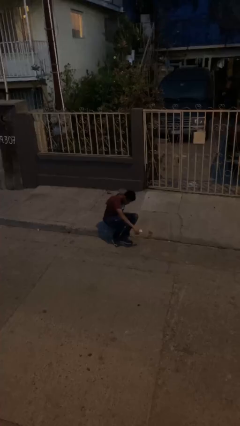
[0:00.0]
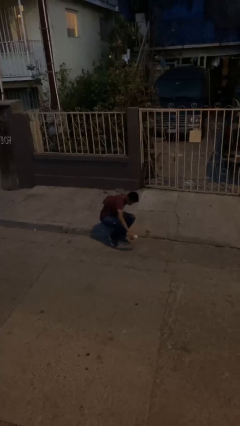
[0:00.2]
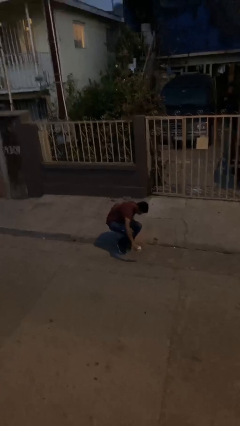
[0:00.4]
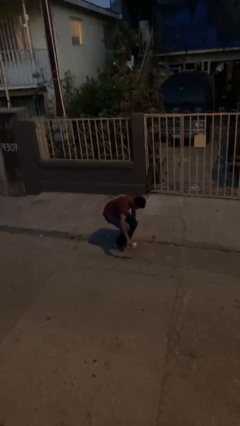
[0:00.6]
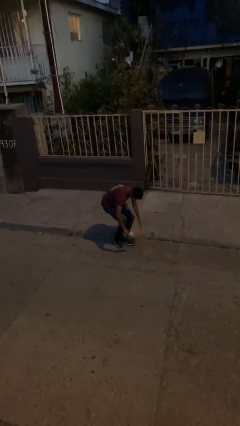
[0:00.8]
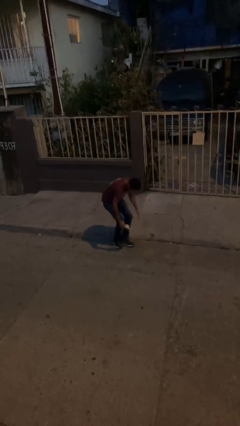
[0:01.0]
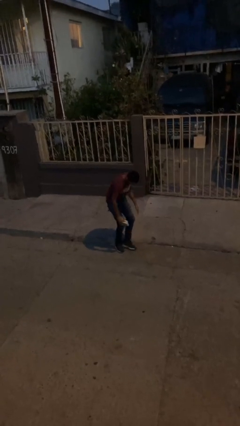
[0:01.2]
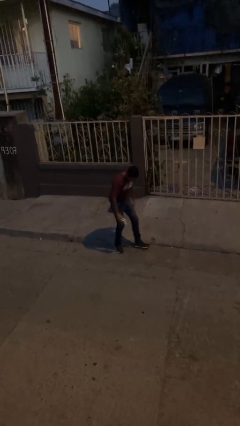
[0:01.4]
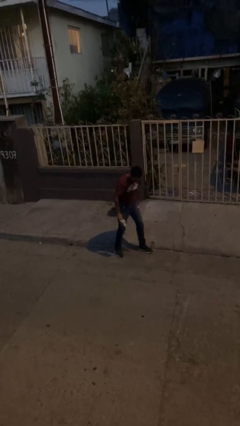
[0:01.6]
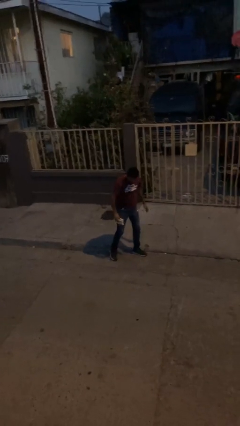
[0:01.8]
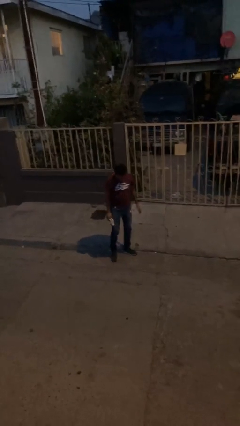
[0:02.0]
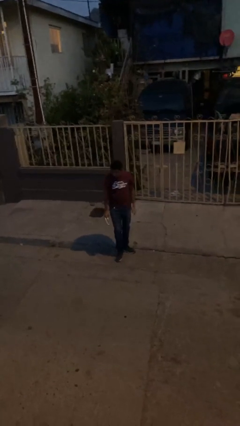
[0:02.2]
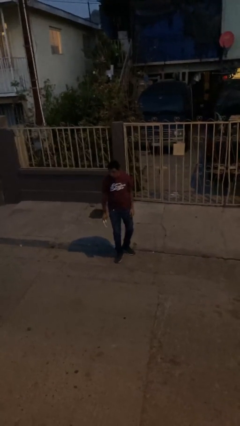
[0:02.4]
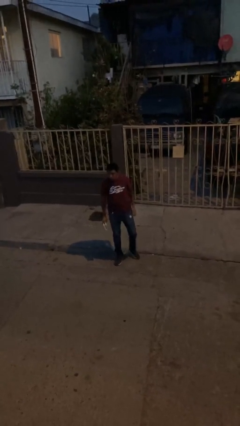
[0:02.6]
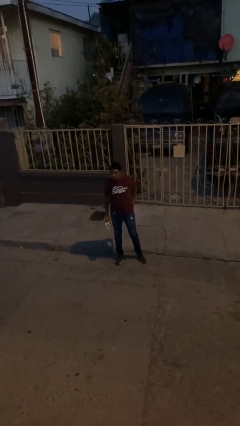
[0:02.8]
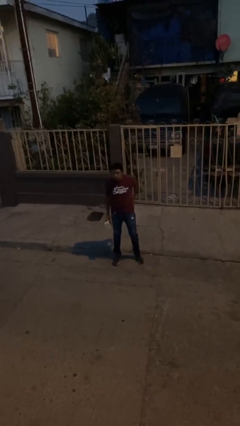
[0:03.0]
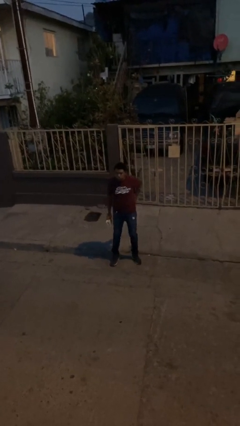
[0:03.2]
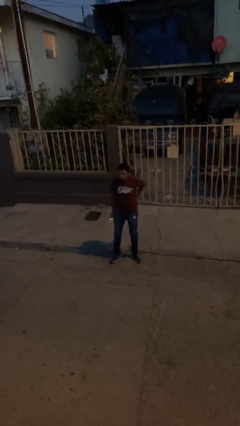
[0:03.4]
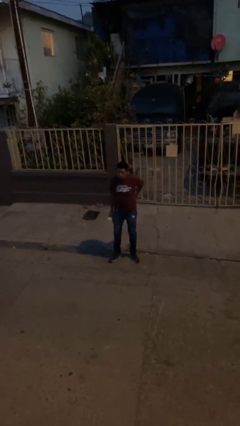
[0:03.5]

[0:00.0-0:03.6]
person stands up

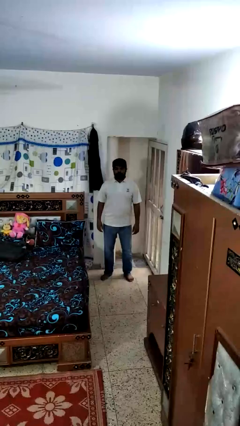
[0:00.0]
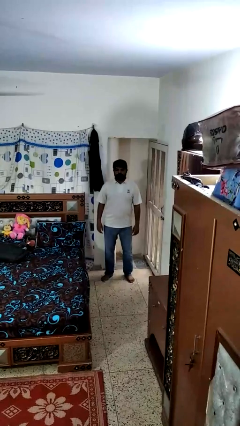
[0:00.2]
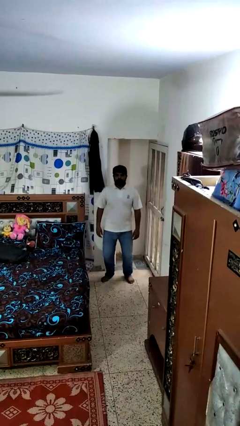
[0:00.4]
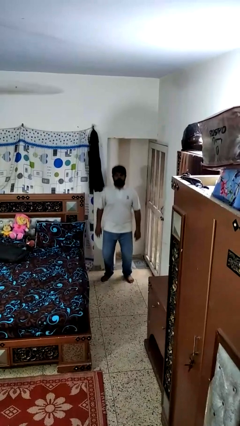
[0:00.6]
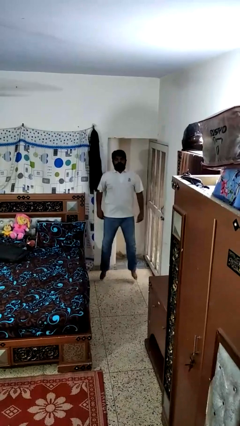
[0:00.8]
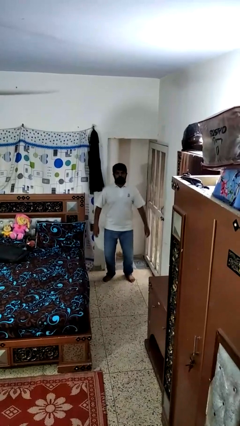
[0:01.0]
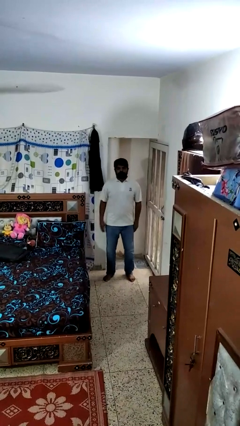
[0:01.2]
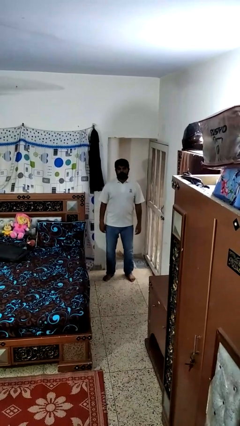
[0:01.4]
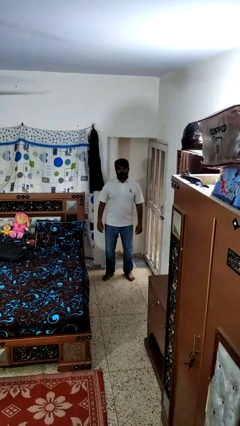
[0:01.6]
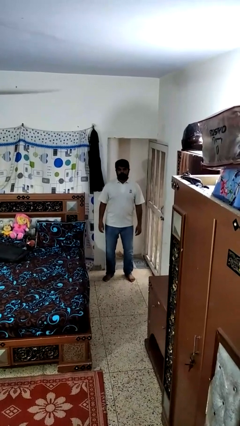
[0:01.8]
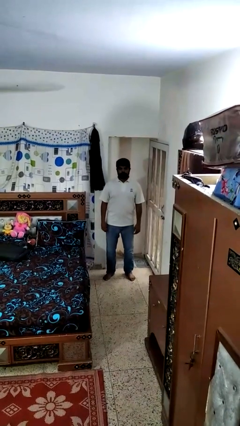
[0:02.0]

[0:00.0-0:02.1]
person jumps

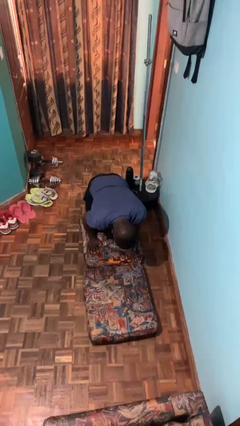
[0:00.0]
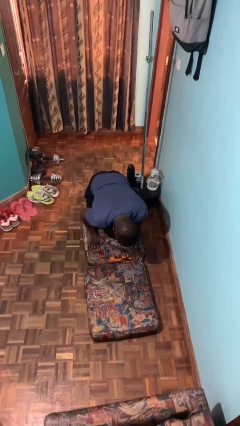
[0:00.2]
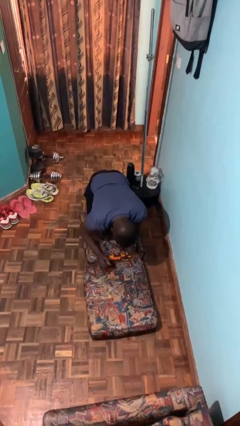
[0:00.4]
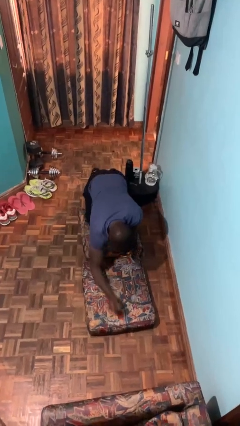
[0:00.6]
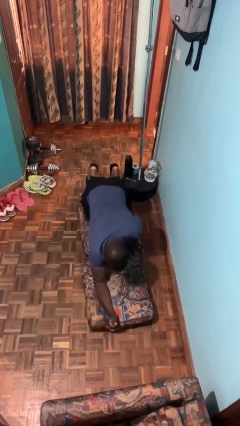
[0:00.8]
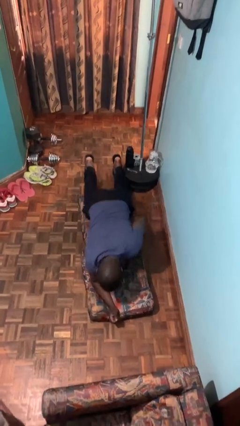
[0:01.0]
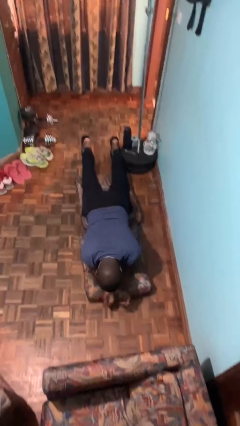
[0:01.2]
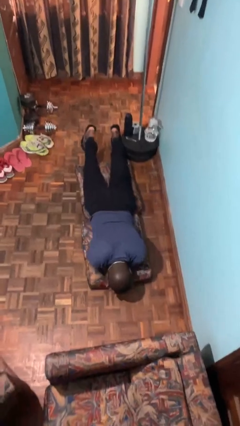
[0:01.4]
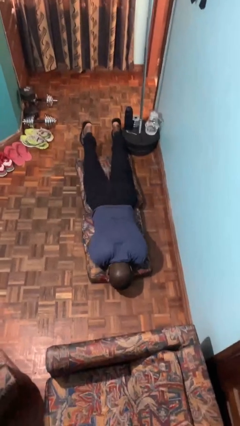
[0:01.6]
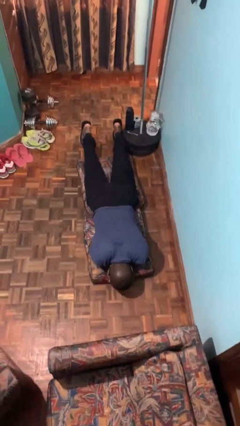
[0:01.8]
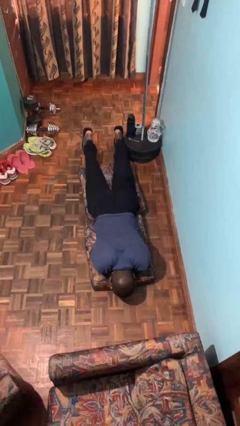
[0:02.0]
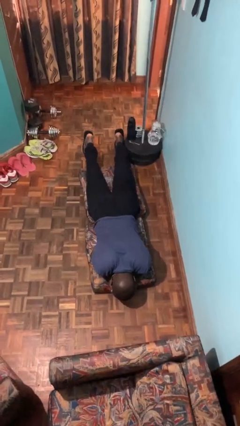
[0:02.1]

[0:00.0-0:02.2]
person lies down on floor

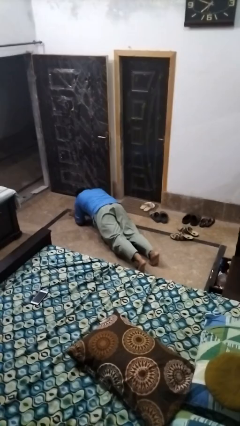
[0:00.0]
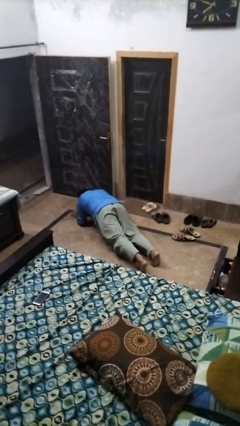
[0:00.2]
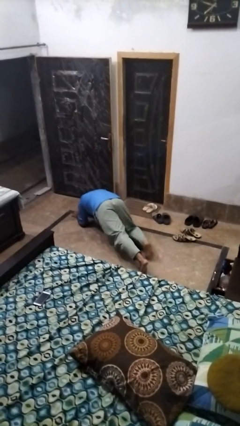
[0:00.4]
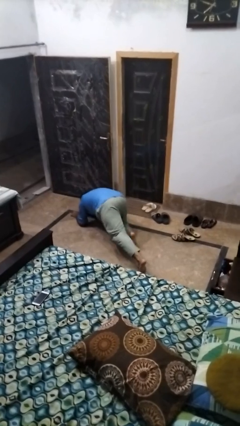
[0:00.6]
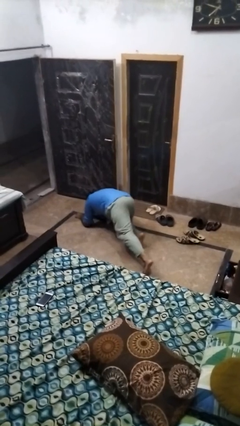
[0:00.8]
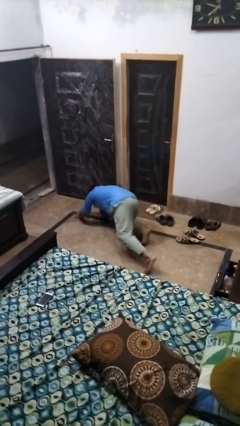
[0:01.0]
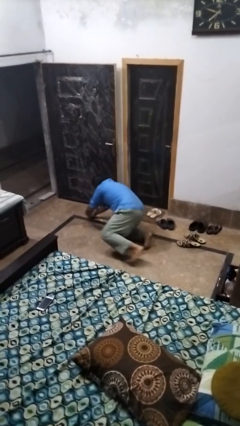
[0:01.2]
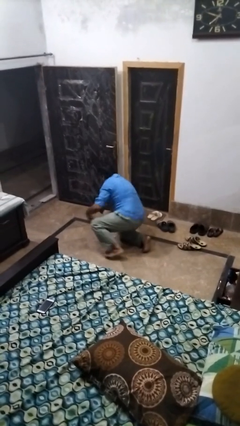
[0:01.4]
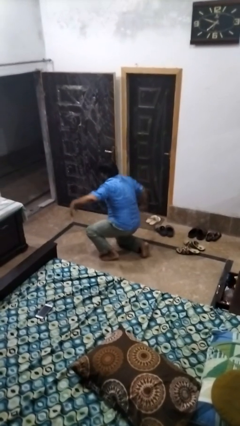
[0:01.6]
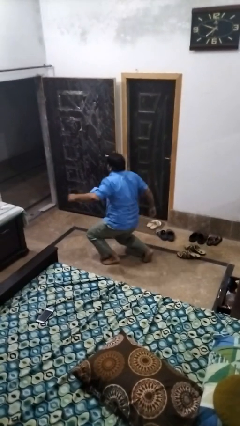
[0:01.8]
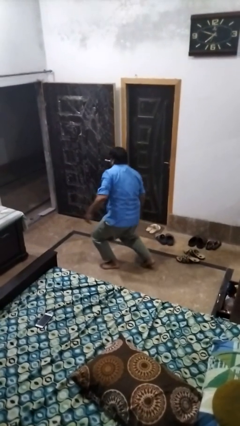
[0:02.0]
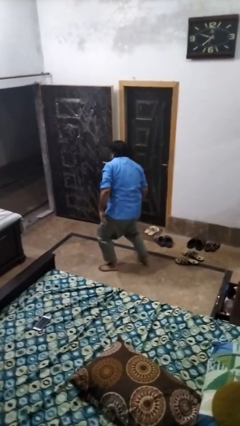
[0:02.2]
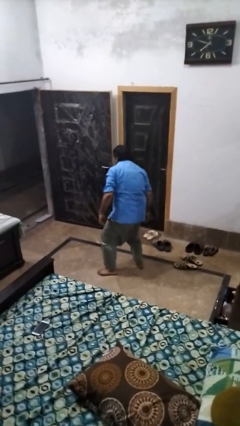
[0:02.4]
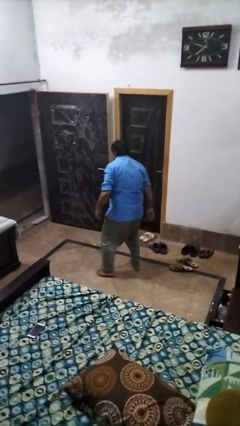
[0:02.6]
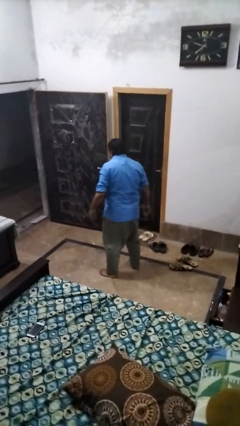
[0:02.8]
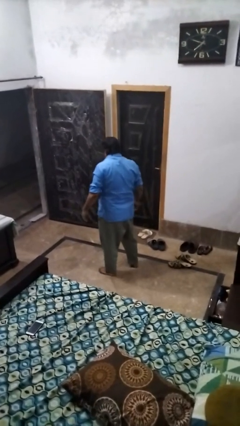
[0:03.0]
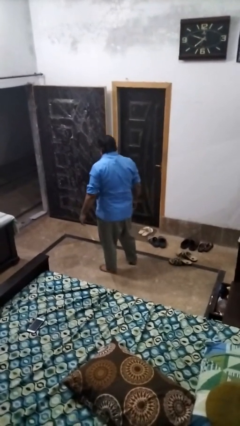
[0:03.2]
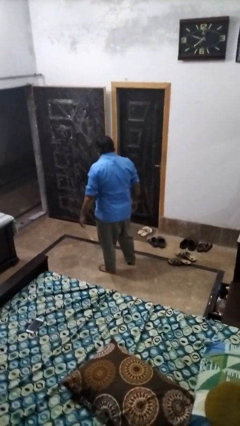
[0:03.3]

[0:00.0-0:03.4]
person stands up from floor

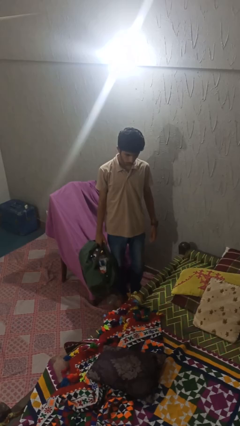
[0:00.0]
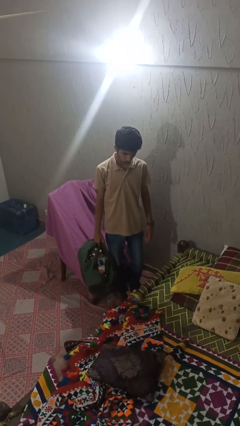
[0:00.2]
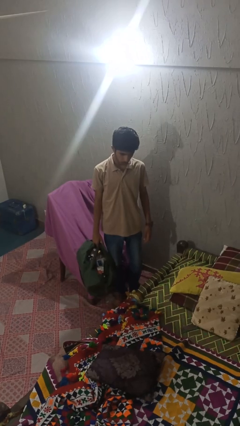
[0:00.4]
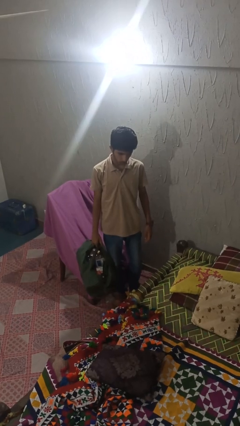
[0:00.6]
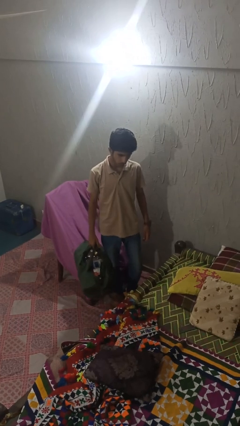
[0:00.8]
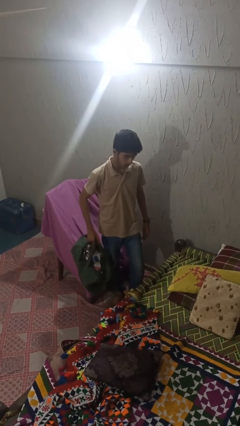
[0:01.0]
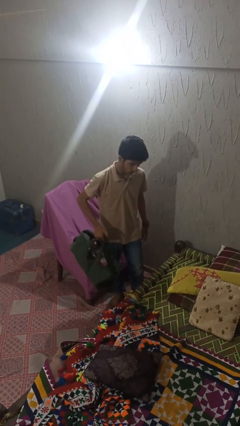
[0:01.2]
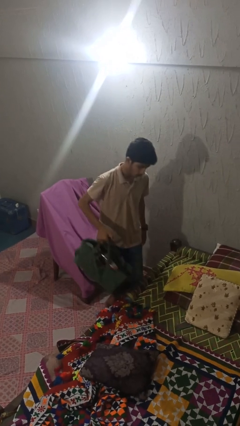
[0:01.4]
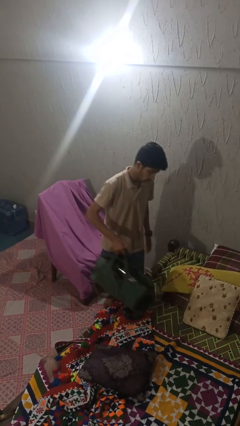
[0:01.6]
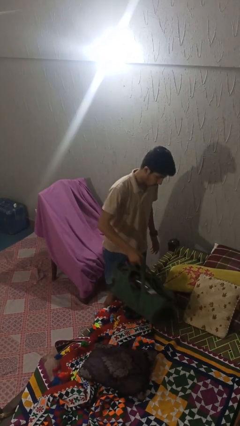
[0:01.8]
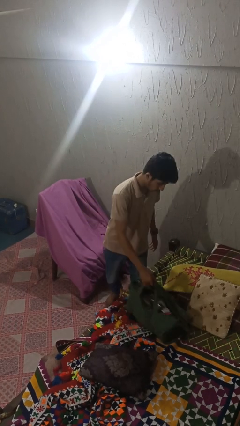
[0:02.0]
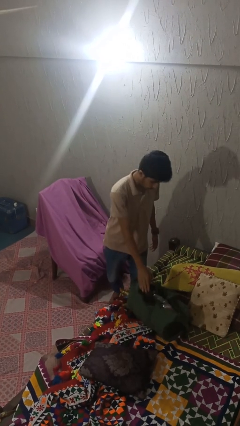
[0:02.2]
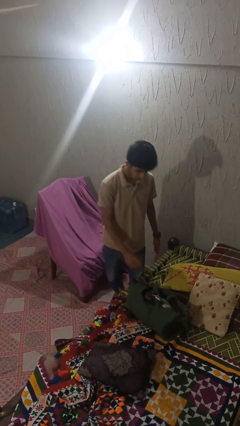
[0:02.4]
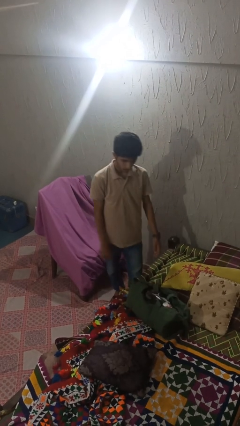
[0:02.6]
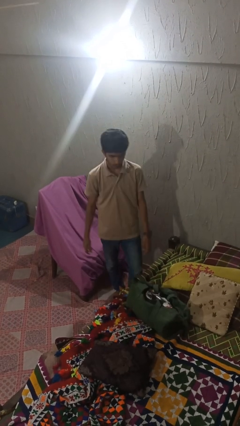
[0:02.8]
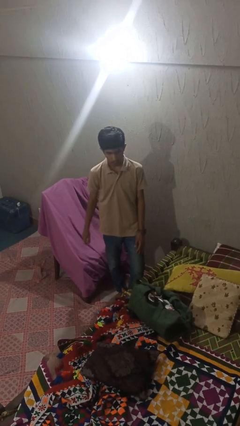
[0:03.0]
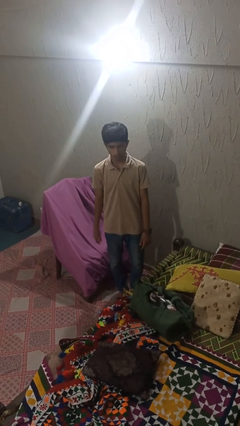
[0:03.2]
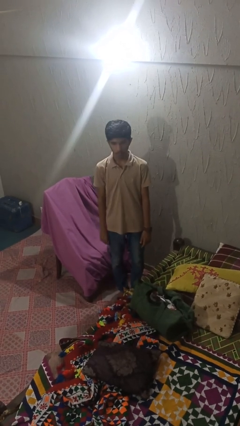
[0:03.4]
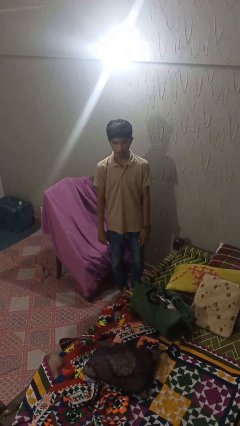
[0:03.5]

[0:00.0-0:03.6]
person puts down object on bed

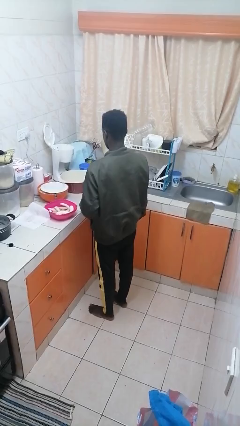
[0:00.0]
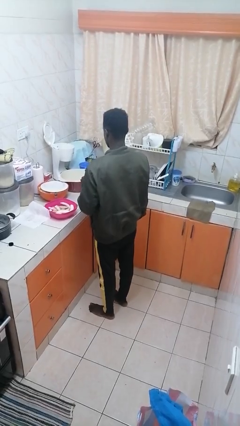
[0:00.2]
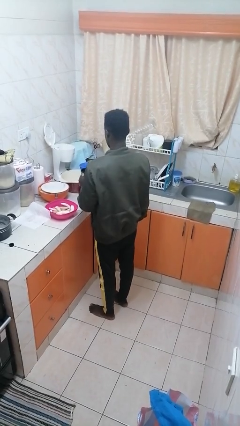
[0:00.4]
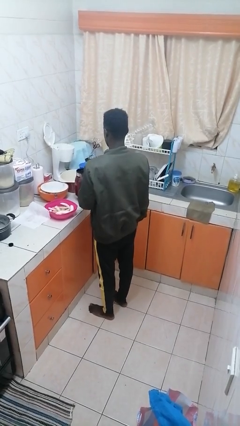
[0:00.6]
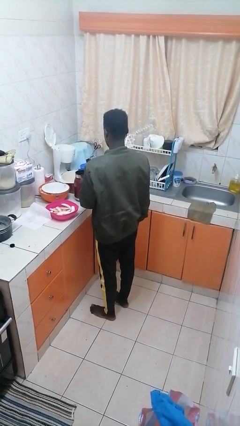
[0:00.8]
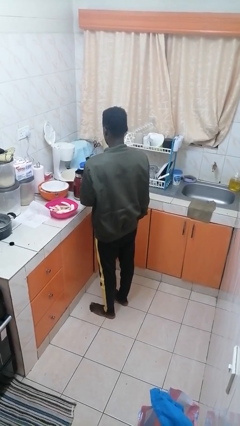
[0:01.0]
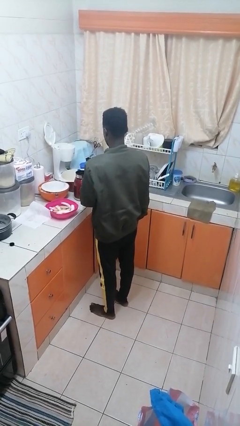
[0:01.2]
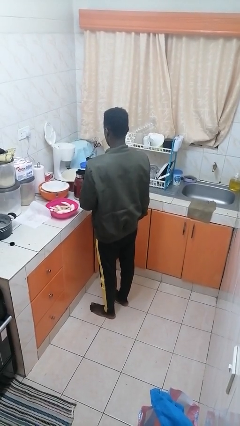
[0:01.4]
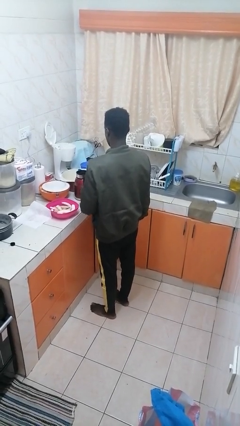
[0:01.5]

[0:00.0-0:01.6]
person puts down object on countertop

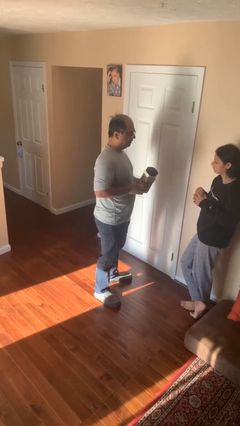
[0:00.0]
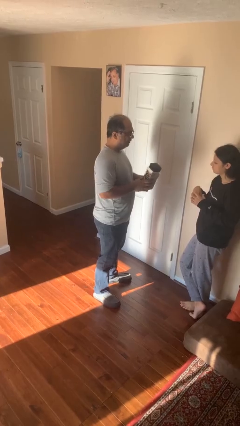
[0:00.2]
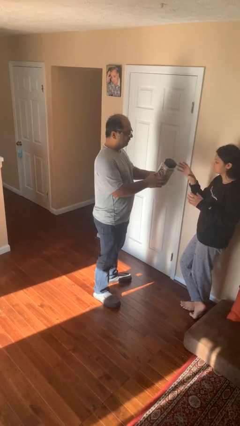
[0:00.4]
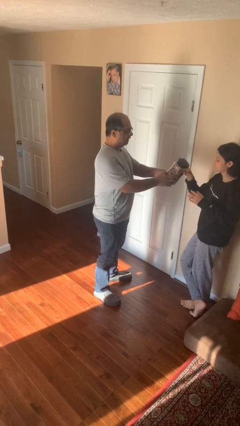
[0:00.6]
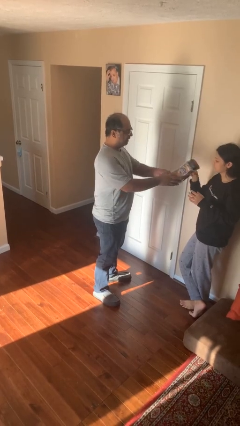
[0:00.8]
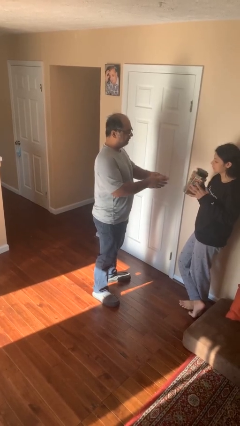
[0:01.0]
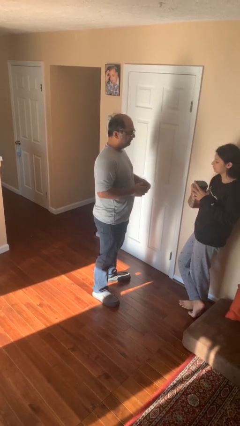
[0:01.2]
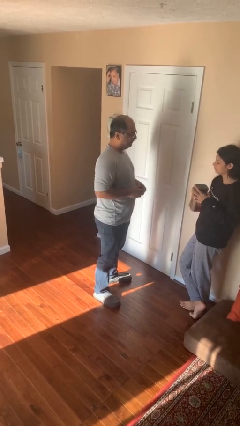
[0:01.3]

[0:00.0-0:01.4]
person transfers object to person
